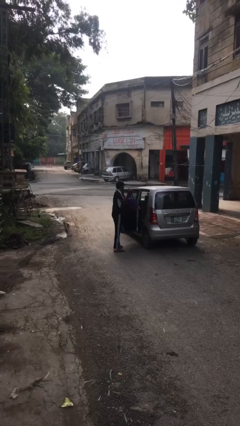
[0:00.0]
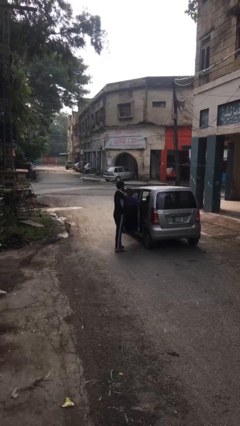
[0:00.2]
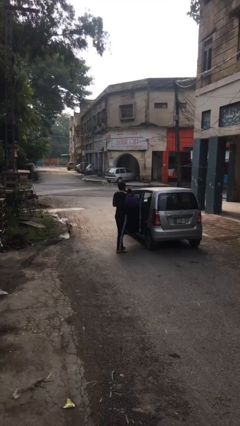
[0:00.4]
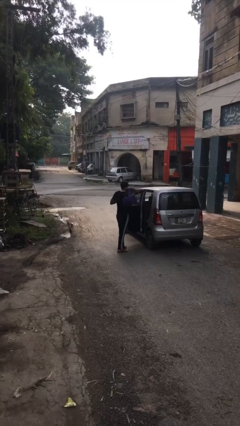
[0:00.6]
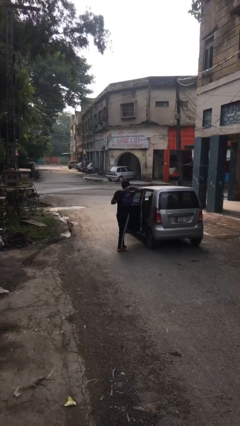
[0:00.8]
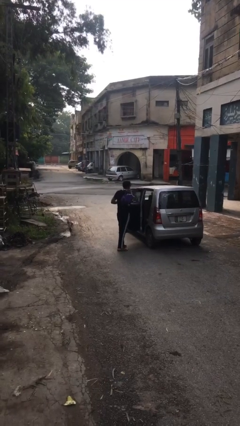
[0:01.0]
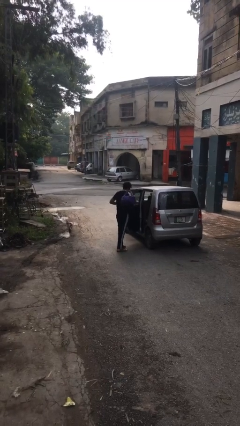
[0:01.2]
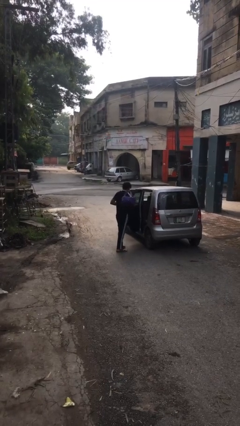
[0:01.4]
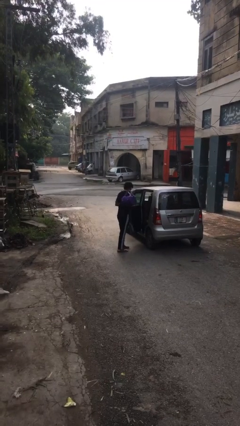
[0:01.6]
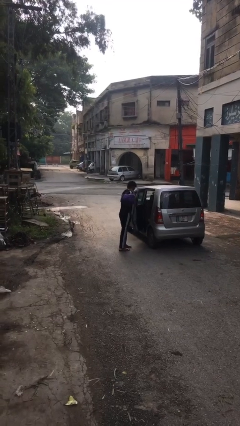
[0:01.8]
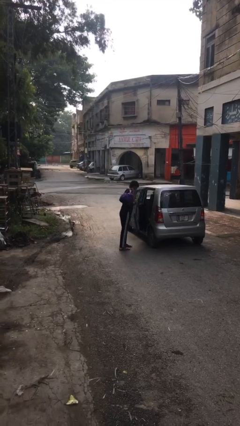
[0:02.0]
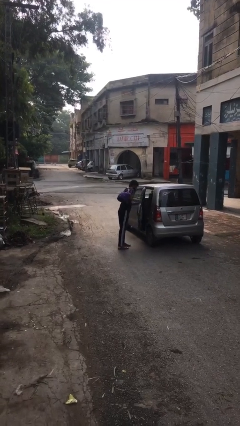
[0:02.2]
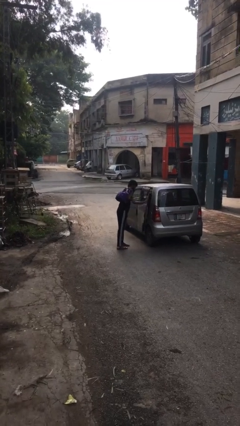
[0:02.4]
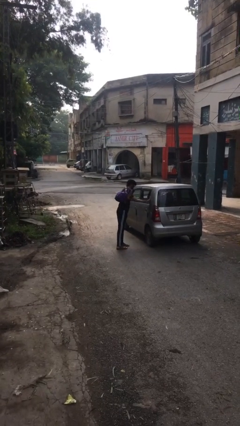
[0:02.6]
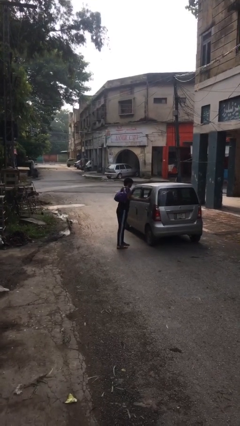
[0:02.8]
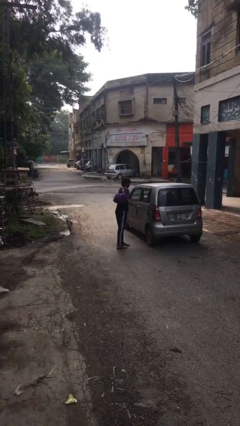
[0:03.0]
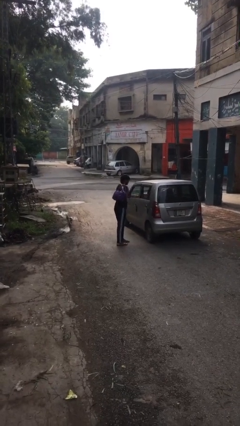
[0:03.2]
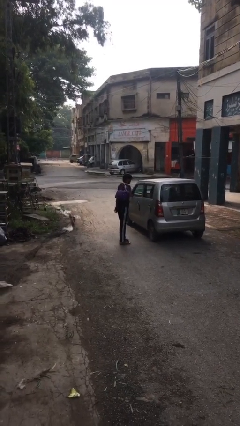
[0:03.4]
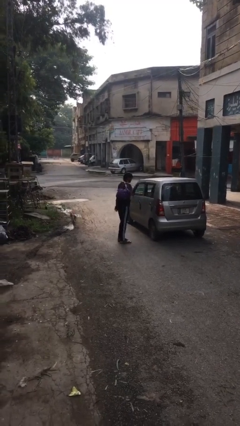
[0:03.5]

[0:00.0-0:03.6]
person closes car door

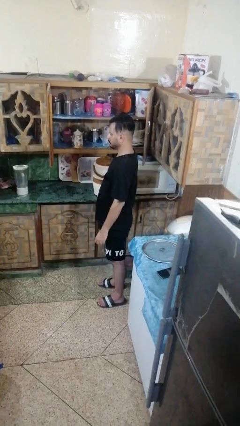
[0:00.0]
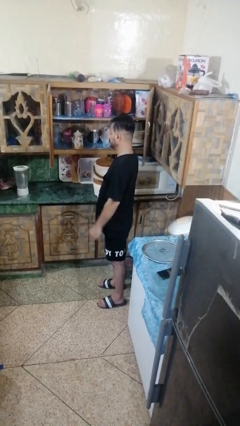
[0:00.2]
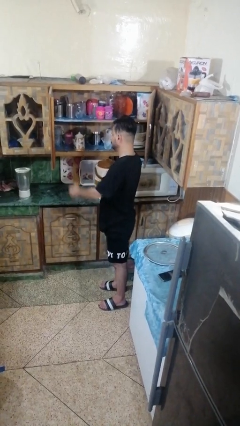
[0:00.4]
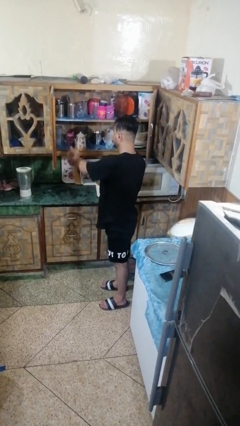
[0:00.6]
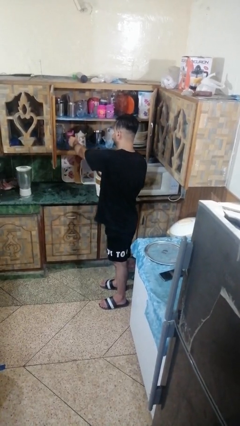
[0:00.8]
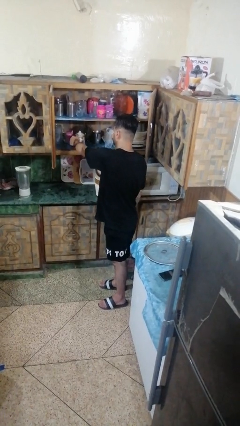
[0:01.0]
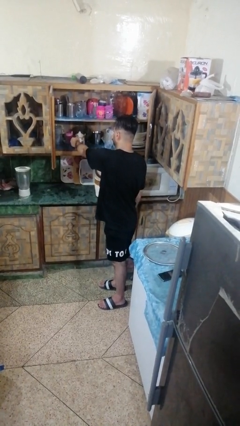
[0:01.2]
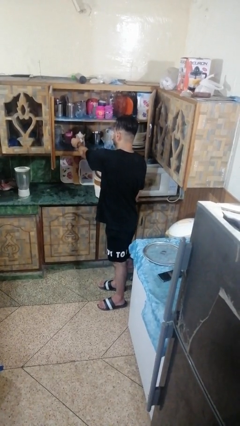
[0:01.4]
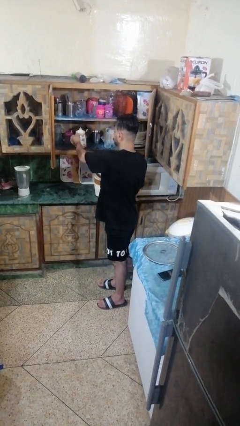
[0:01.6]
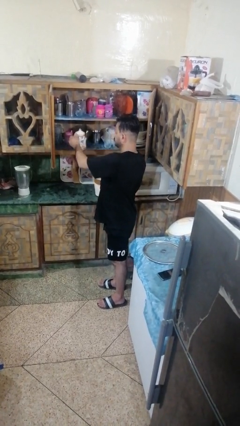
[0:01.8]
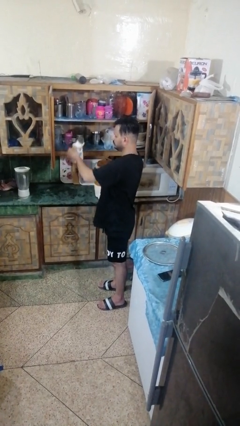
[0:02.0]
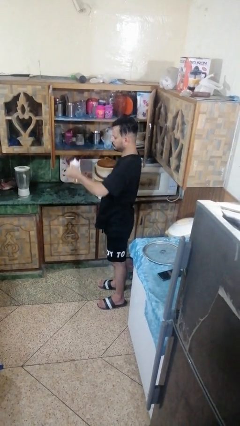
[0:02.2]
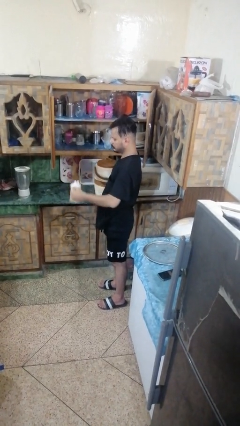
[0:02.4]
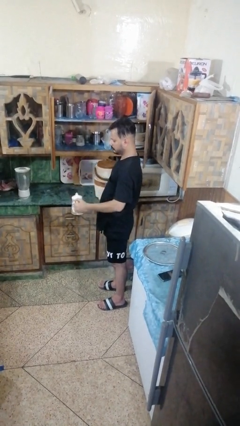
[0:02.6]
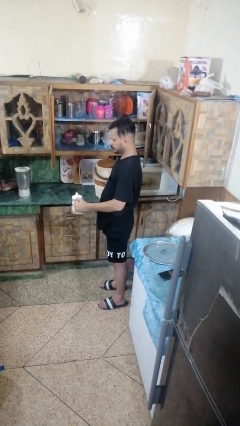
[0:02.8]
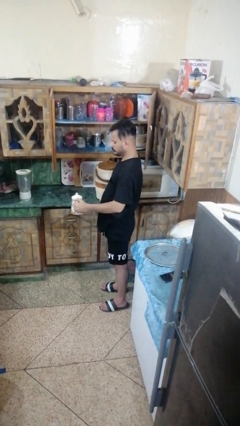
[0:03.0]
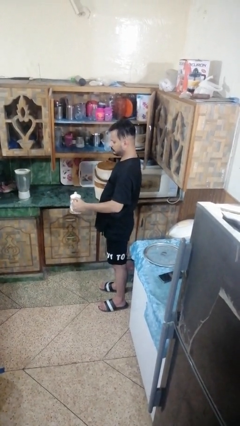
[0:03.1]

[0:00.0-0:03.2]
person picks up object from cabinet

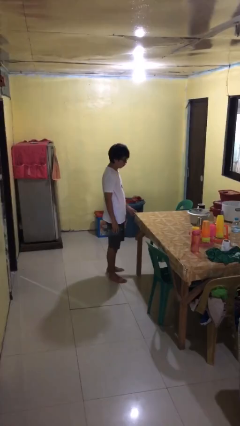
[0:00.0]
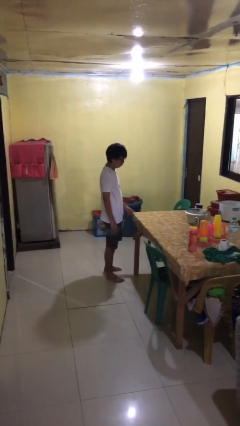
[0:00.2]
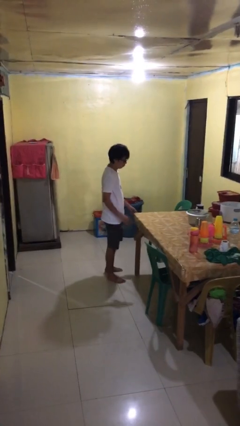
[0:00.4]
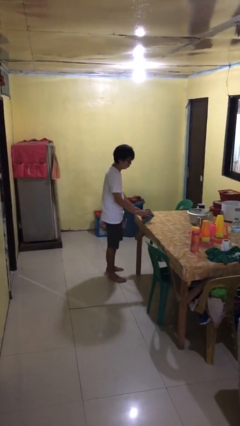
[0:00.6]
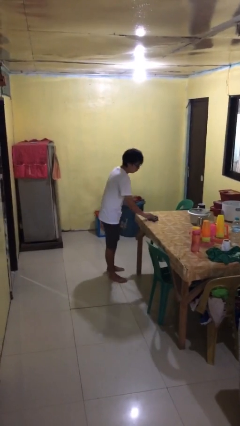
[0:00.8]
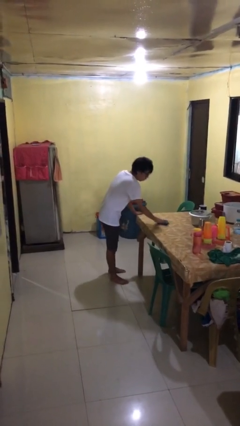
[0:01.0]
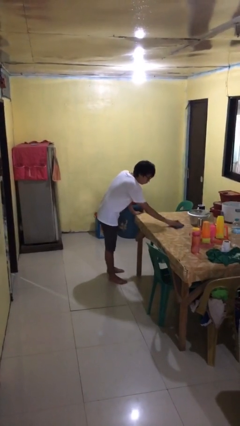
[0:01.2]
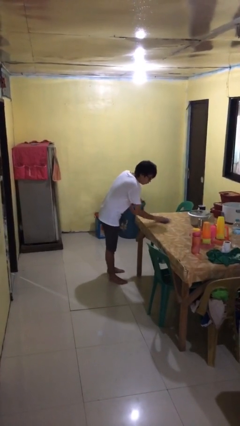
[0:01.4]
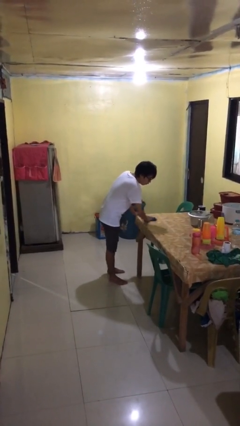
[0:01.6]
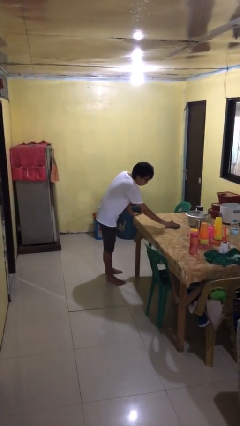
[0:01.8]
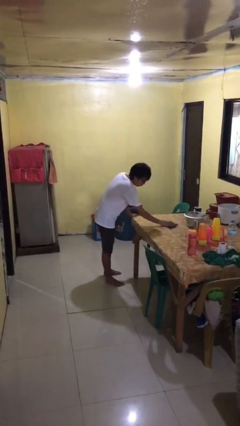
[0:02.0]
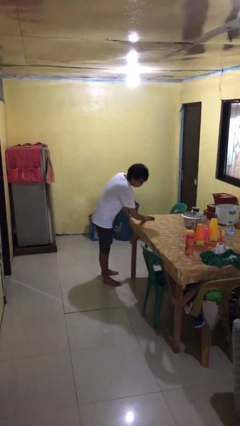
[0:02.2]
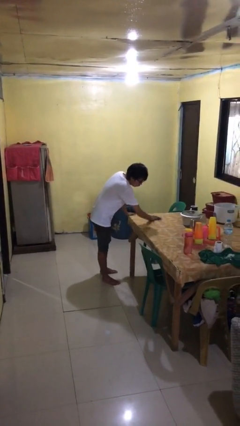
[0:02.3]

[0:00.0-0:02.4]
person cleans table with rag

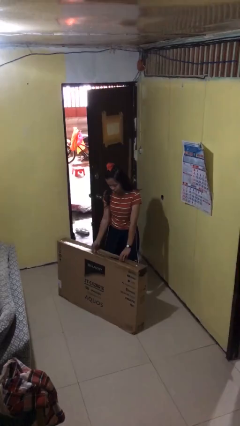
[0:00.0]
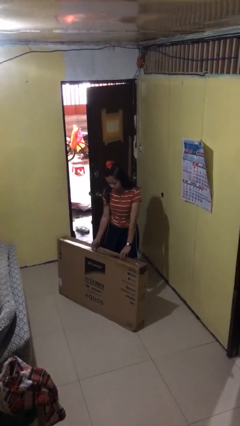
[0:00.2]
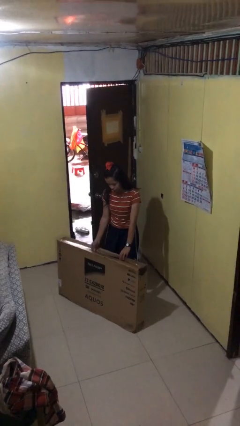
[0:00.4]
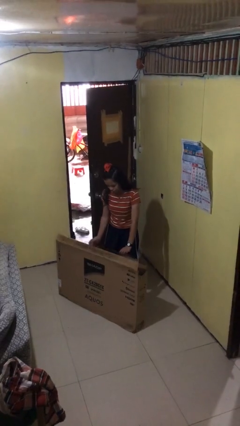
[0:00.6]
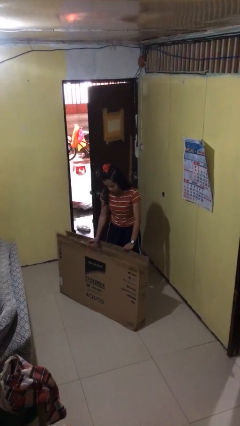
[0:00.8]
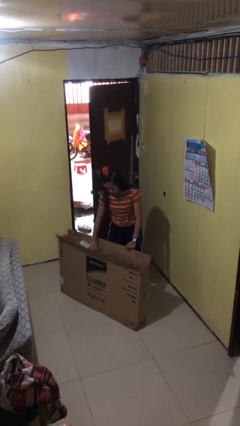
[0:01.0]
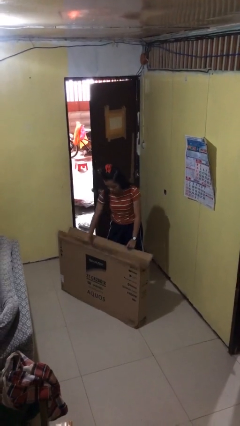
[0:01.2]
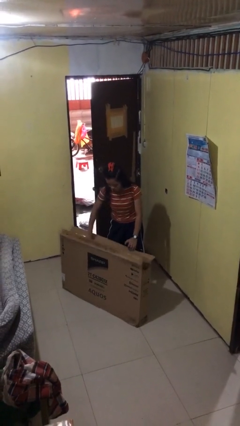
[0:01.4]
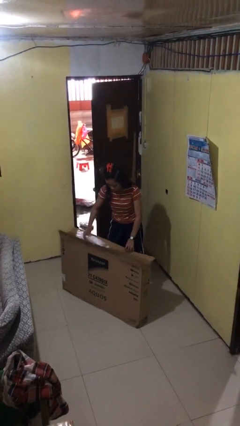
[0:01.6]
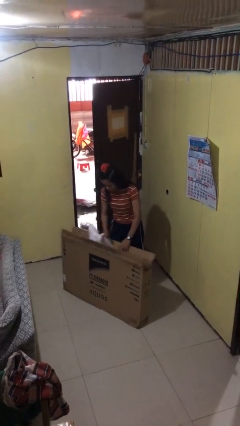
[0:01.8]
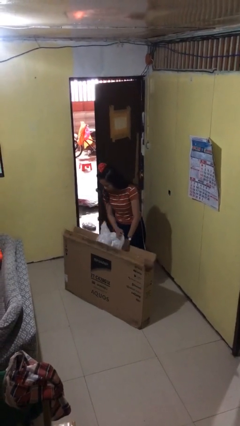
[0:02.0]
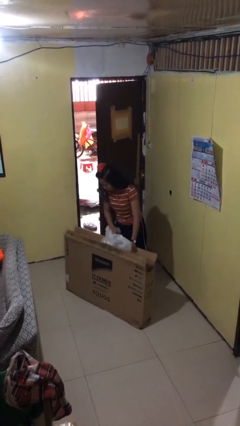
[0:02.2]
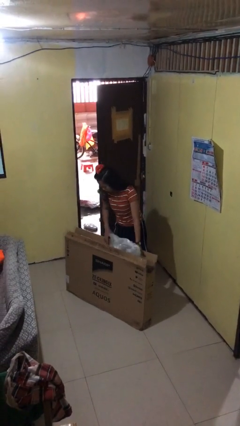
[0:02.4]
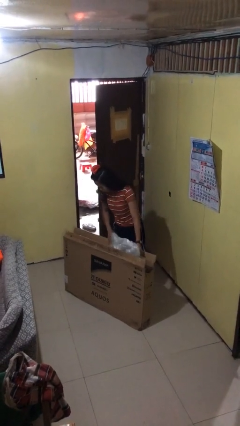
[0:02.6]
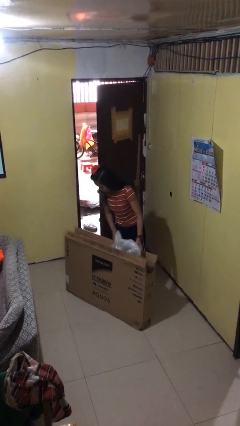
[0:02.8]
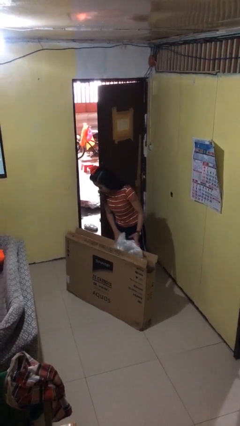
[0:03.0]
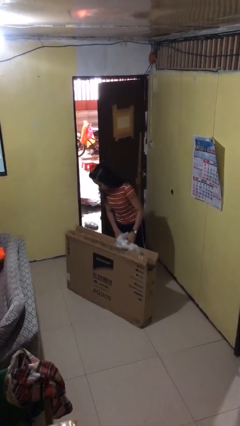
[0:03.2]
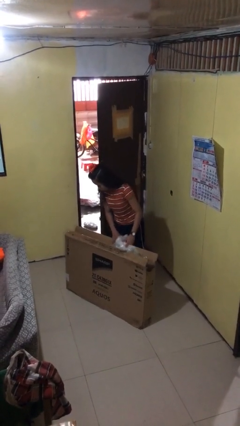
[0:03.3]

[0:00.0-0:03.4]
person searches in box

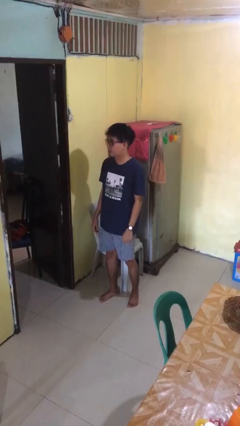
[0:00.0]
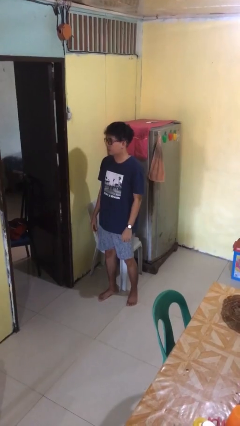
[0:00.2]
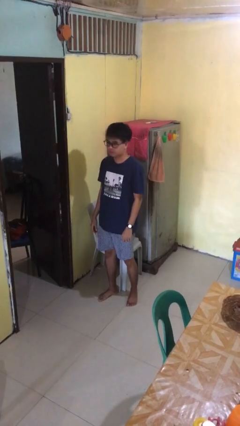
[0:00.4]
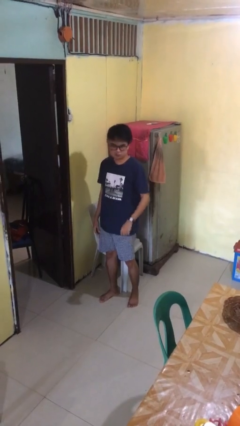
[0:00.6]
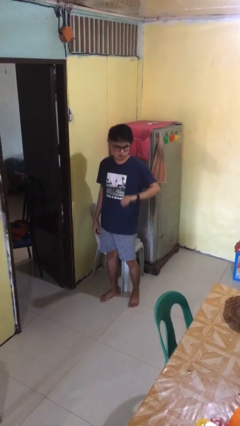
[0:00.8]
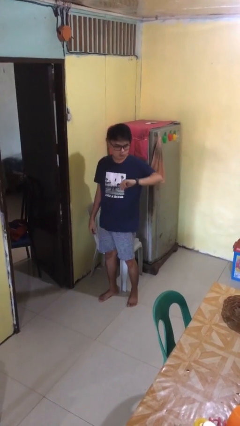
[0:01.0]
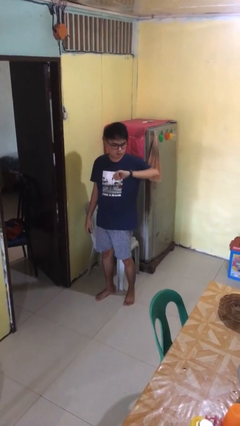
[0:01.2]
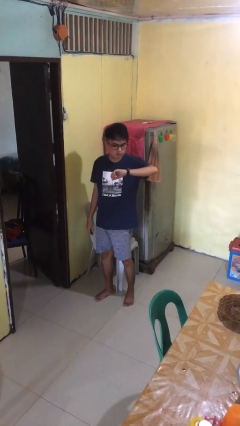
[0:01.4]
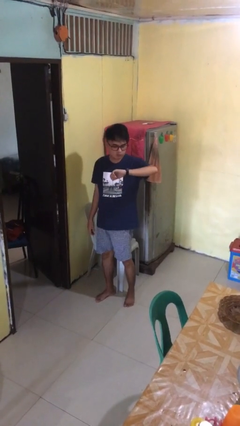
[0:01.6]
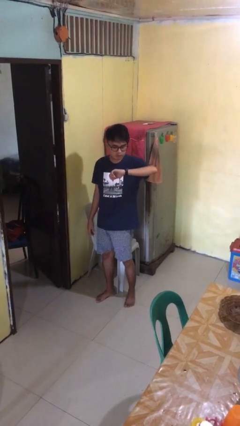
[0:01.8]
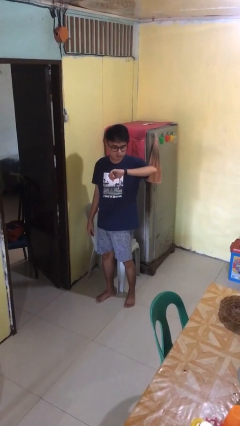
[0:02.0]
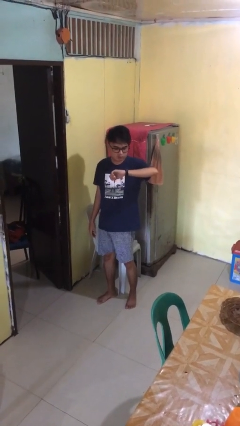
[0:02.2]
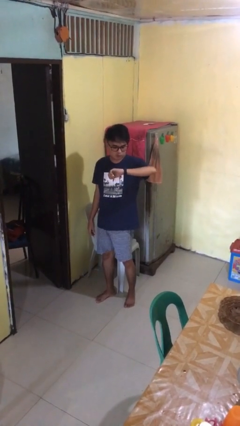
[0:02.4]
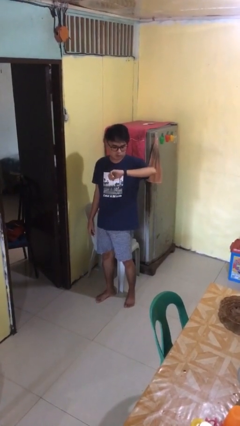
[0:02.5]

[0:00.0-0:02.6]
person looks at wristwatch

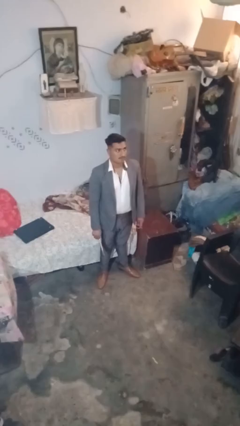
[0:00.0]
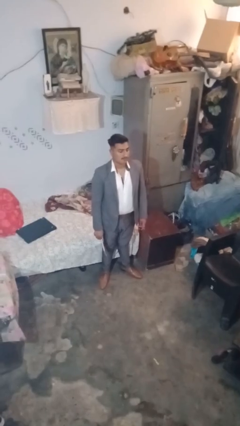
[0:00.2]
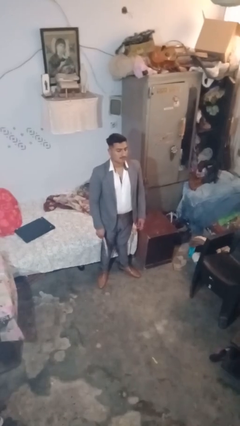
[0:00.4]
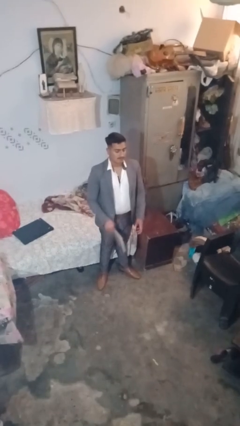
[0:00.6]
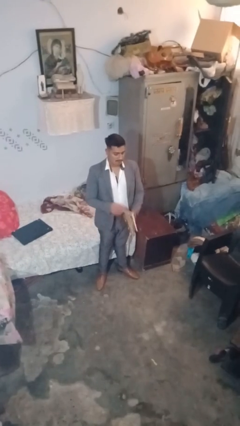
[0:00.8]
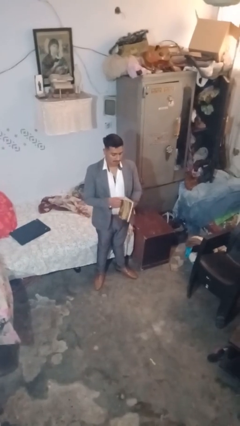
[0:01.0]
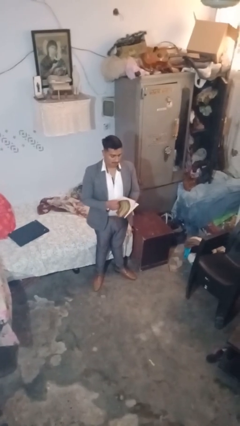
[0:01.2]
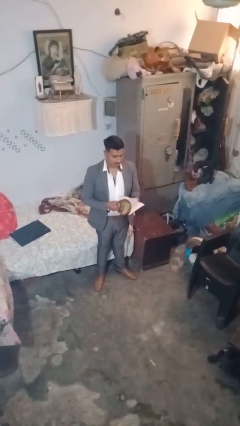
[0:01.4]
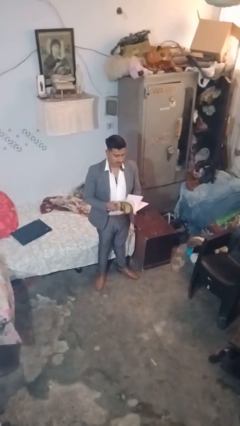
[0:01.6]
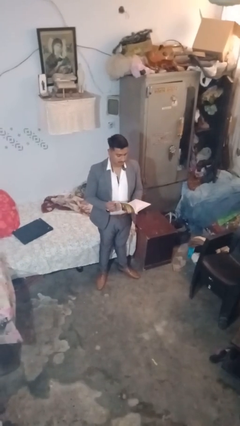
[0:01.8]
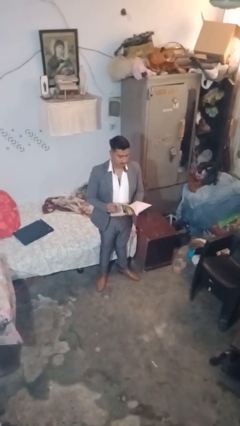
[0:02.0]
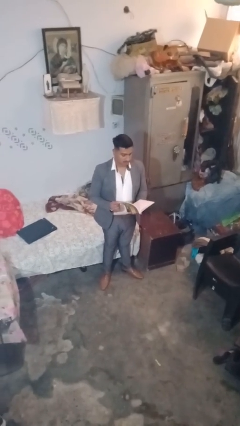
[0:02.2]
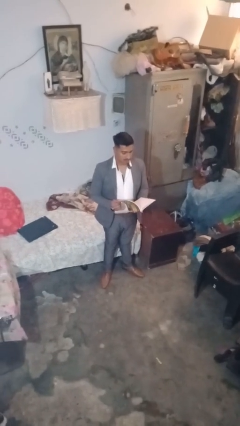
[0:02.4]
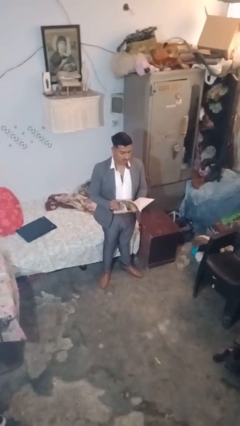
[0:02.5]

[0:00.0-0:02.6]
person reads document
